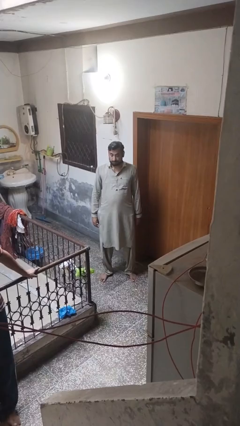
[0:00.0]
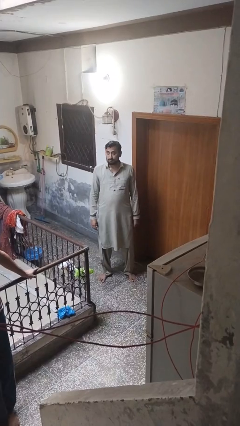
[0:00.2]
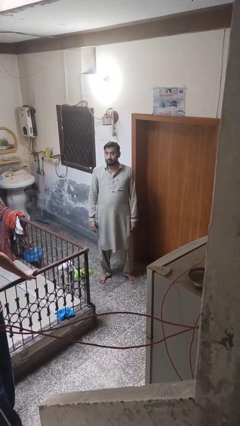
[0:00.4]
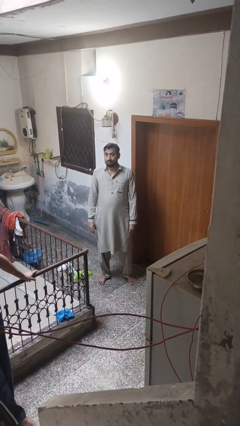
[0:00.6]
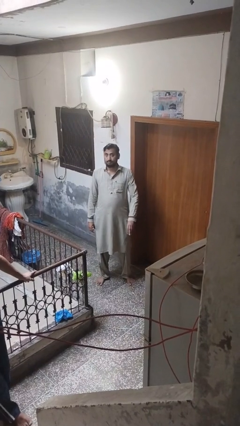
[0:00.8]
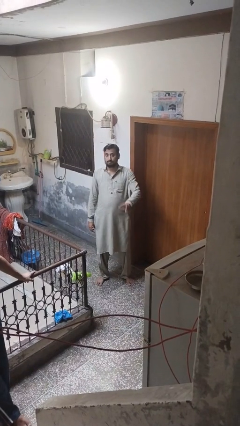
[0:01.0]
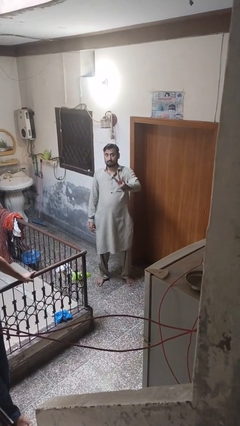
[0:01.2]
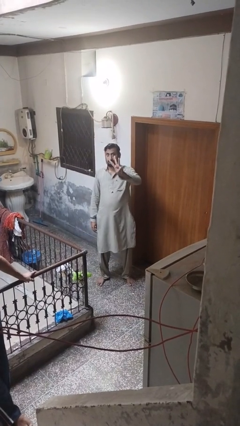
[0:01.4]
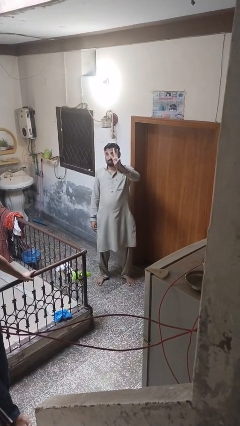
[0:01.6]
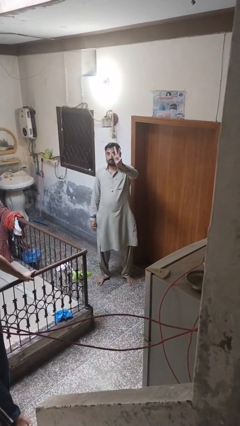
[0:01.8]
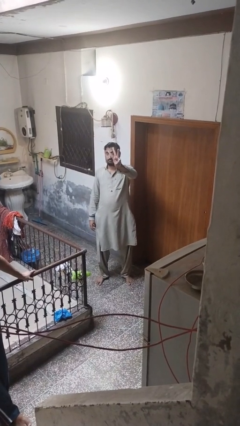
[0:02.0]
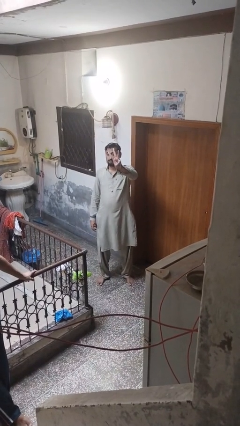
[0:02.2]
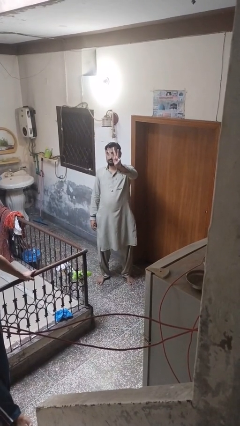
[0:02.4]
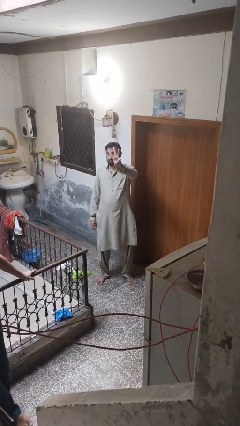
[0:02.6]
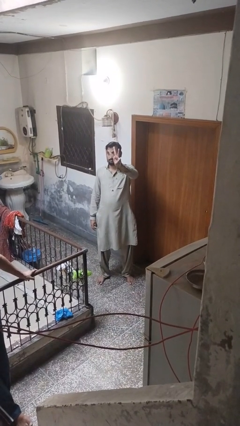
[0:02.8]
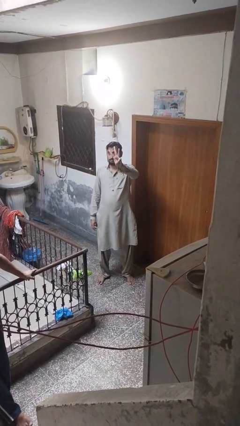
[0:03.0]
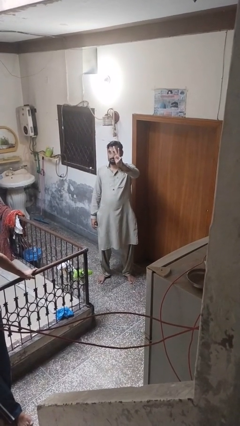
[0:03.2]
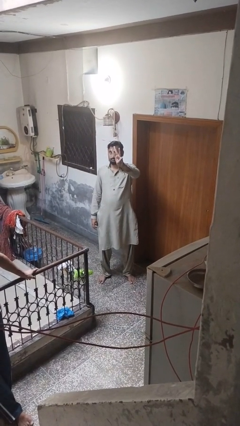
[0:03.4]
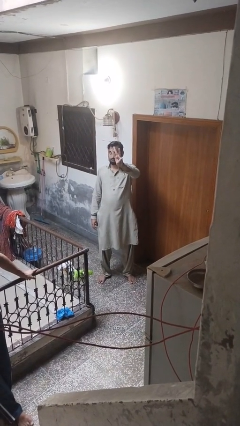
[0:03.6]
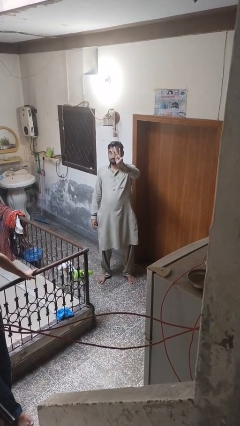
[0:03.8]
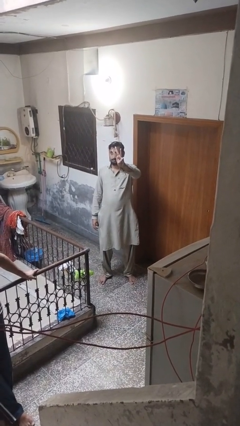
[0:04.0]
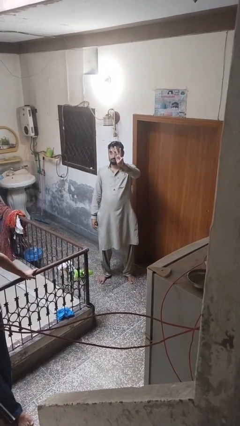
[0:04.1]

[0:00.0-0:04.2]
person gestures number three

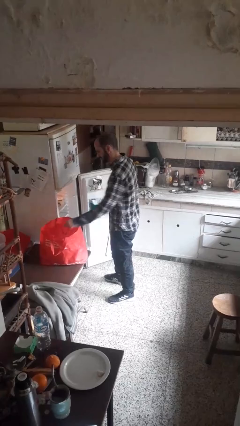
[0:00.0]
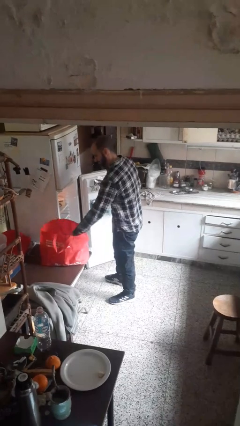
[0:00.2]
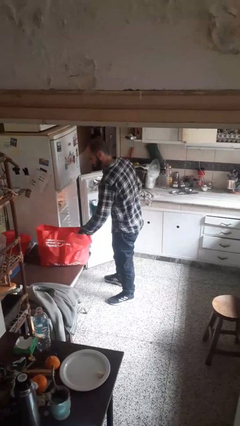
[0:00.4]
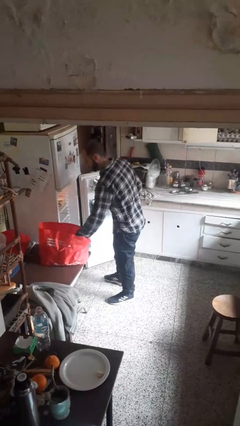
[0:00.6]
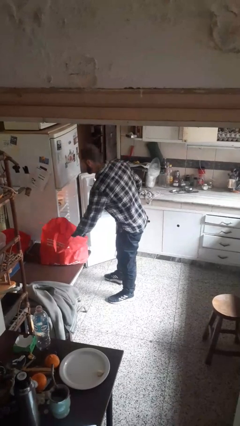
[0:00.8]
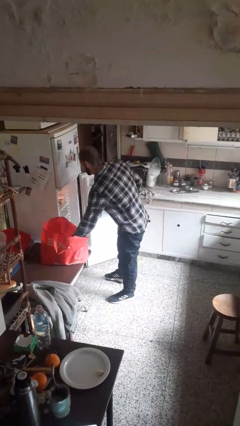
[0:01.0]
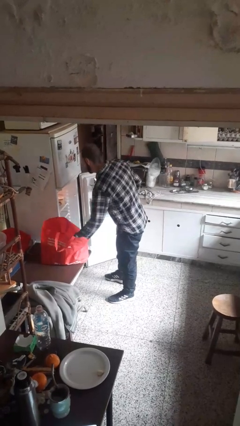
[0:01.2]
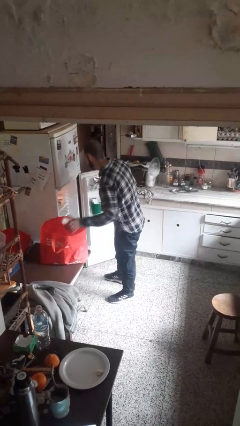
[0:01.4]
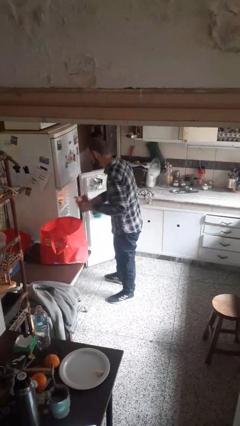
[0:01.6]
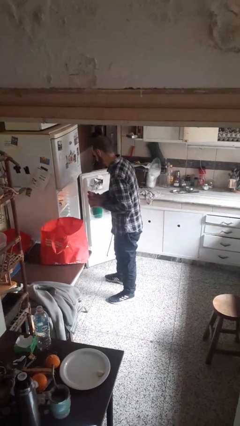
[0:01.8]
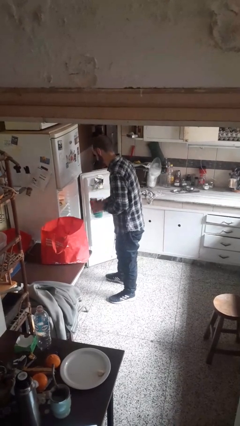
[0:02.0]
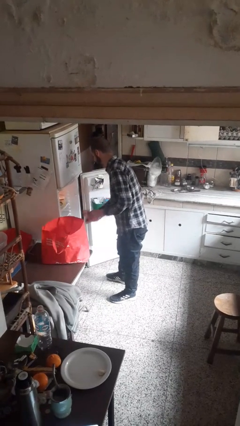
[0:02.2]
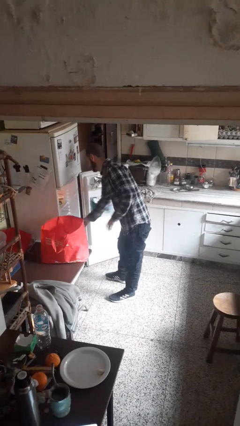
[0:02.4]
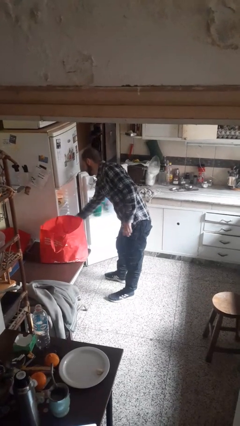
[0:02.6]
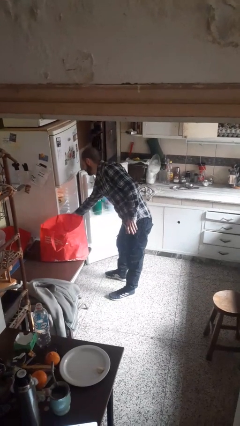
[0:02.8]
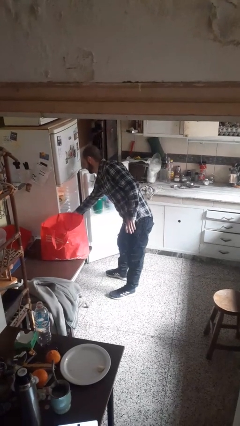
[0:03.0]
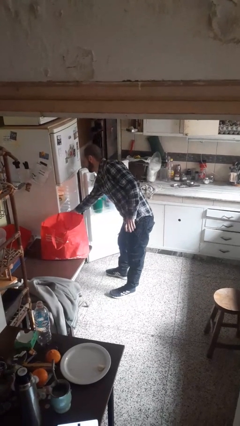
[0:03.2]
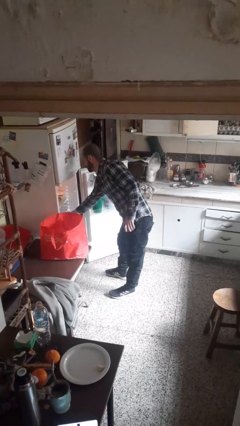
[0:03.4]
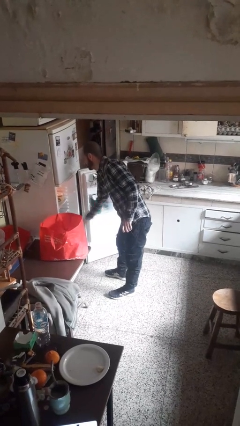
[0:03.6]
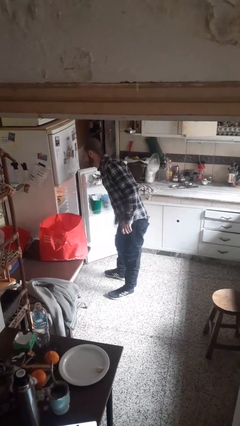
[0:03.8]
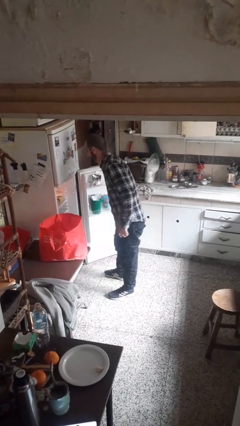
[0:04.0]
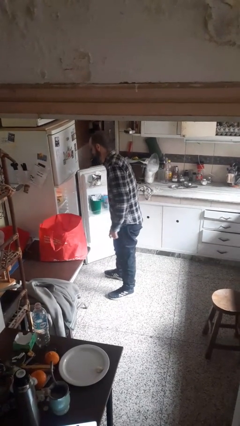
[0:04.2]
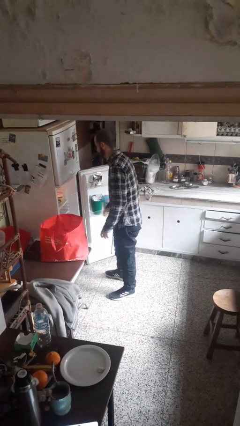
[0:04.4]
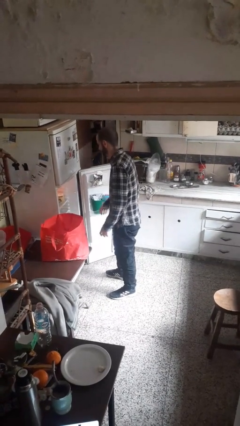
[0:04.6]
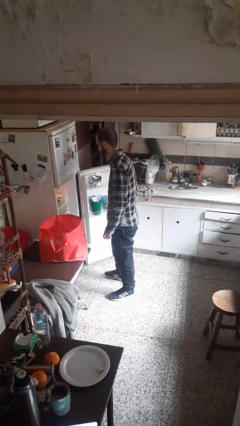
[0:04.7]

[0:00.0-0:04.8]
person loads groceries into refrigerator

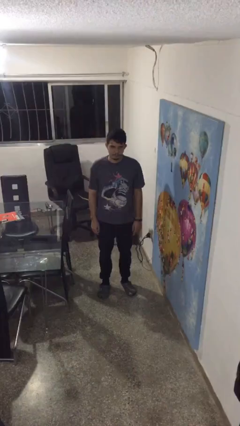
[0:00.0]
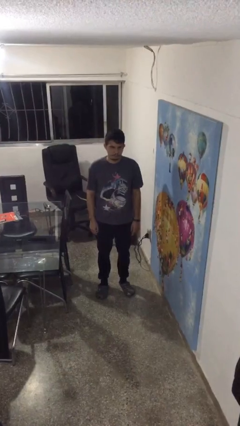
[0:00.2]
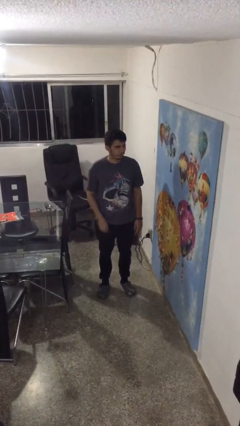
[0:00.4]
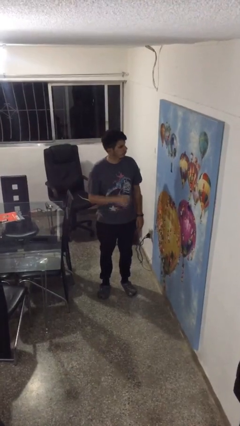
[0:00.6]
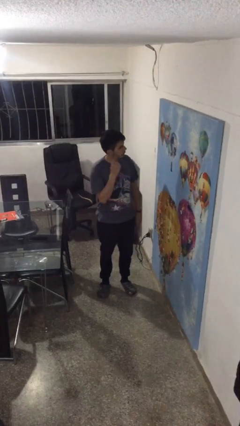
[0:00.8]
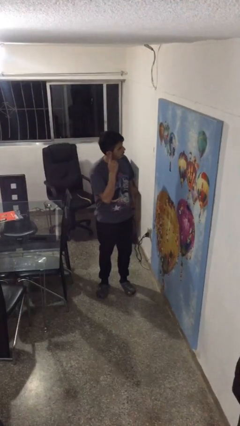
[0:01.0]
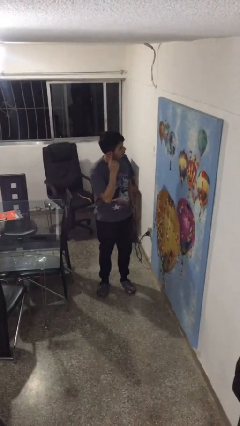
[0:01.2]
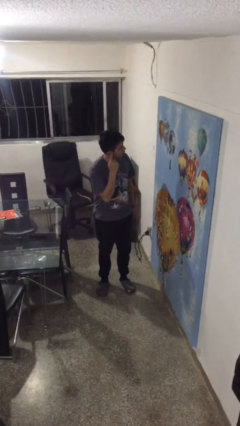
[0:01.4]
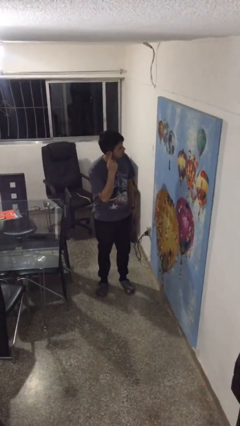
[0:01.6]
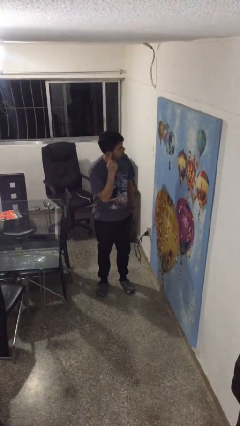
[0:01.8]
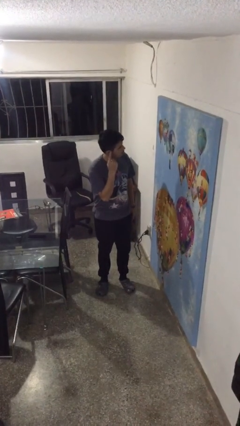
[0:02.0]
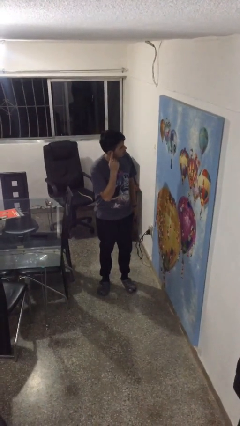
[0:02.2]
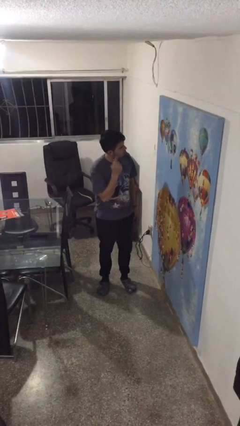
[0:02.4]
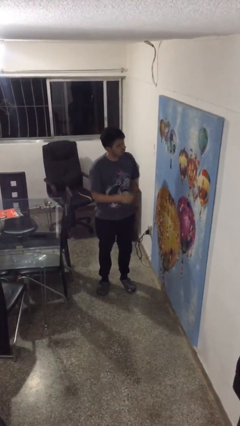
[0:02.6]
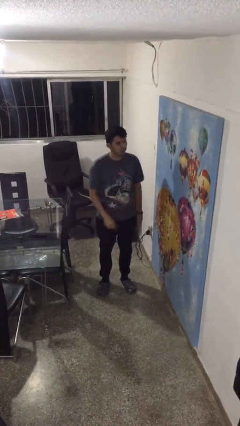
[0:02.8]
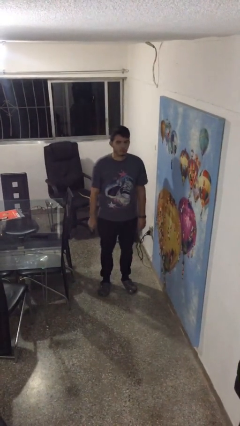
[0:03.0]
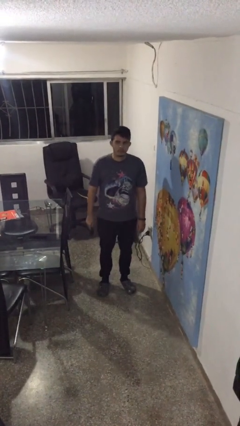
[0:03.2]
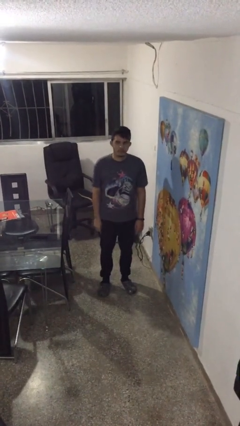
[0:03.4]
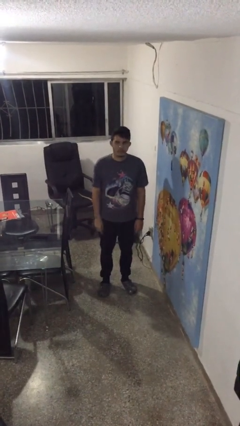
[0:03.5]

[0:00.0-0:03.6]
person gestures listen closely

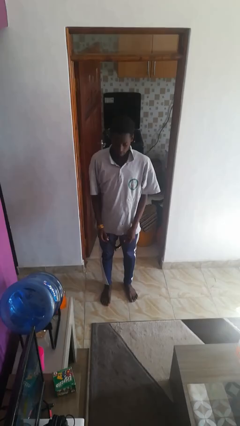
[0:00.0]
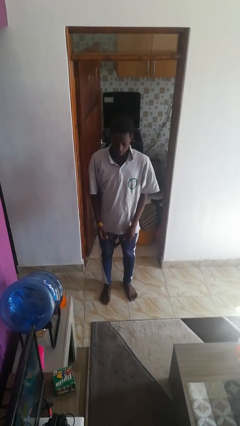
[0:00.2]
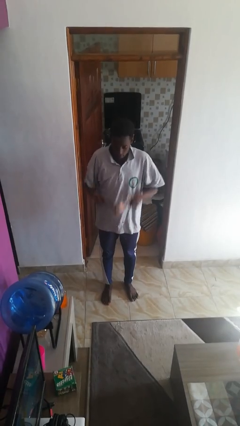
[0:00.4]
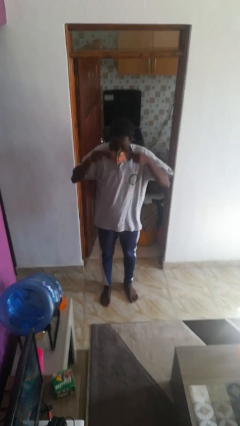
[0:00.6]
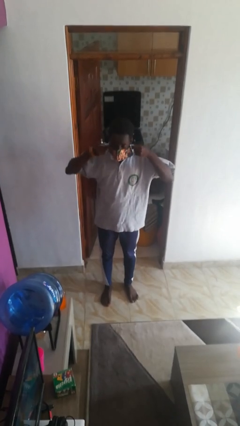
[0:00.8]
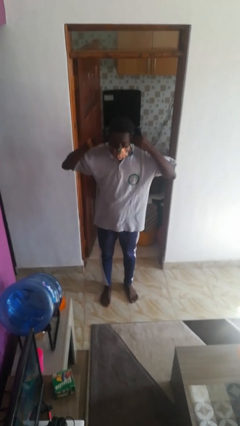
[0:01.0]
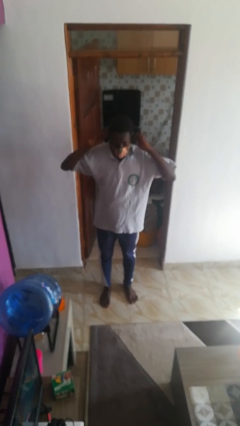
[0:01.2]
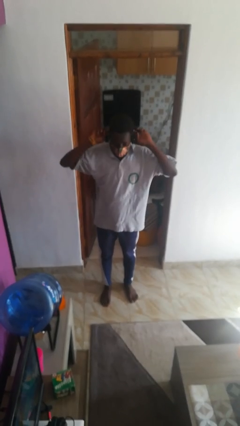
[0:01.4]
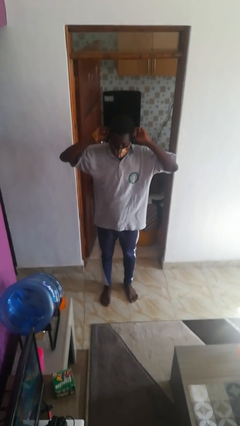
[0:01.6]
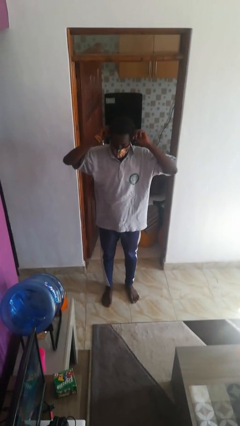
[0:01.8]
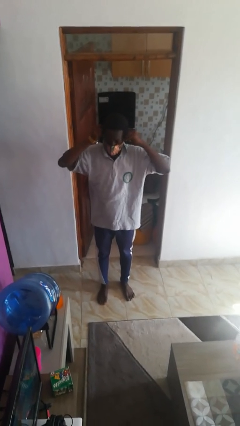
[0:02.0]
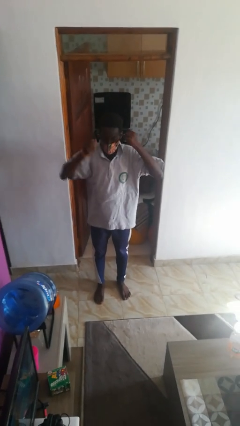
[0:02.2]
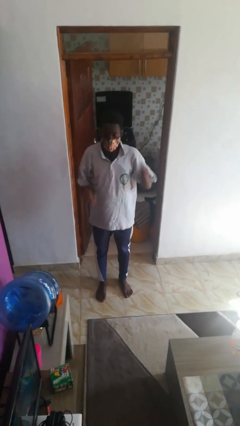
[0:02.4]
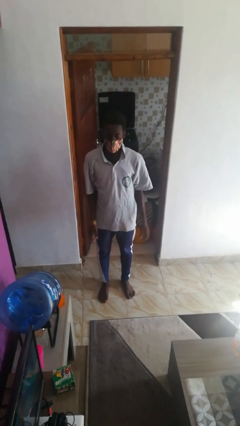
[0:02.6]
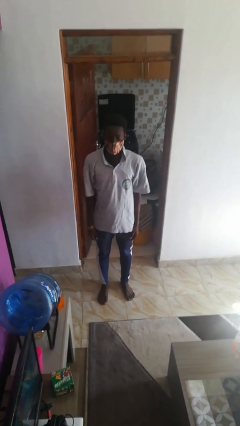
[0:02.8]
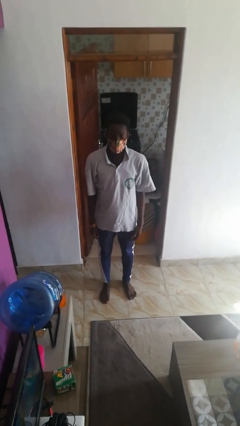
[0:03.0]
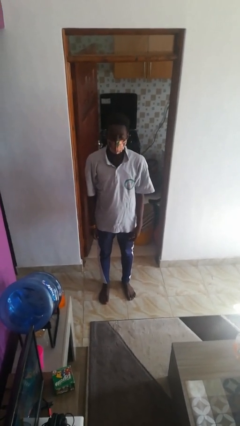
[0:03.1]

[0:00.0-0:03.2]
person puts on facemask

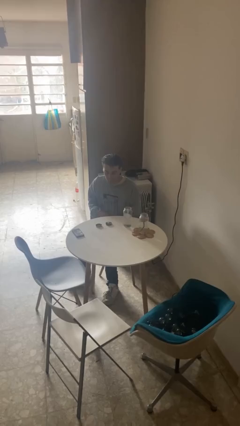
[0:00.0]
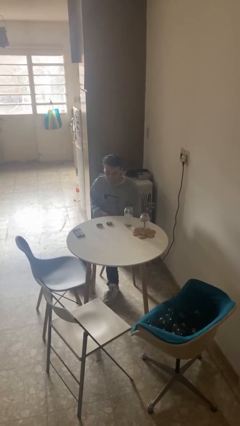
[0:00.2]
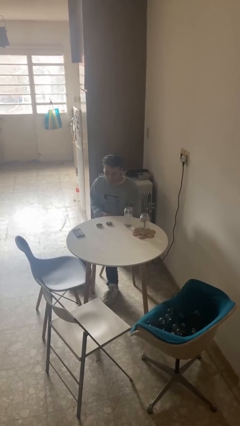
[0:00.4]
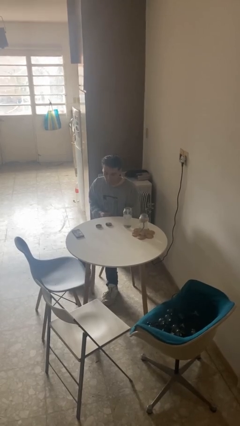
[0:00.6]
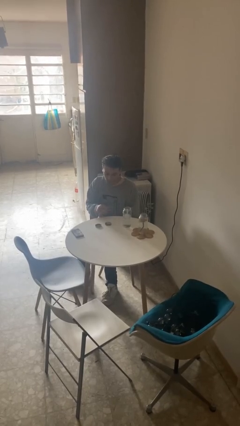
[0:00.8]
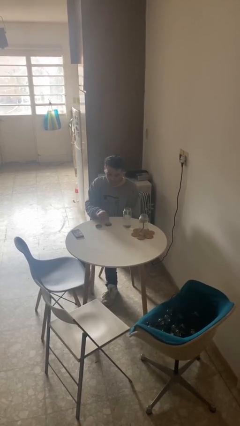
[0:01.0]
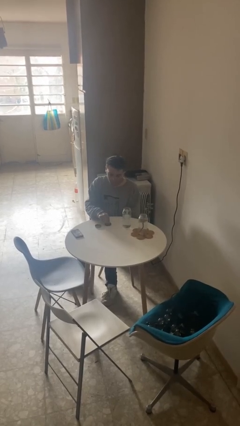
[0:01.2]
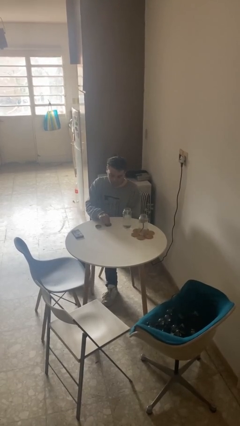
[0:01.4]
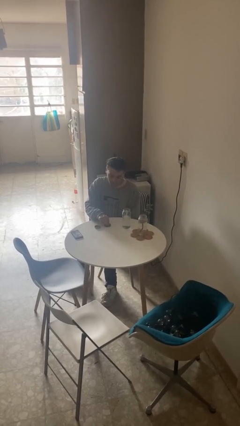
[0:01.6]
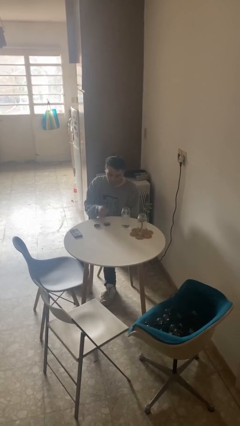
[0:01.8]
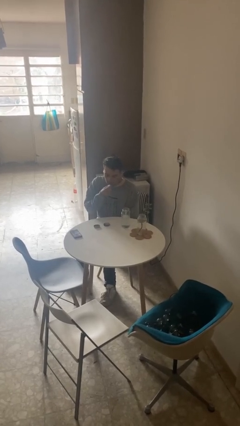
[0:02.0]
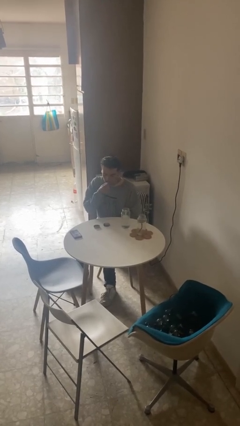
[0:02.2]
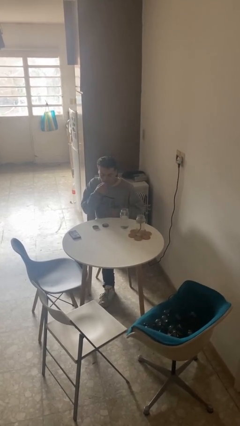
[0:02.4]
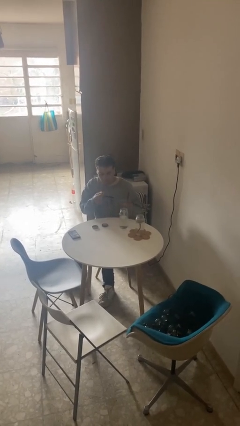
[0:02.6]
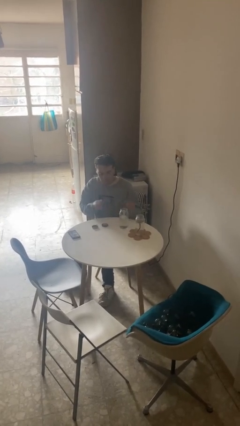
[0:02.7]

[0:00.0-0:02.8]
person takes medicine pills
